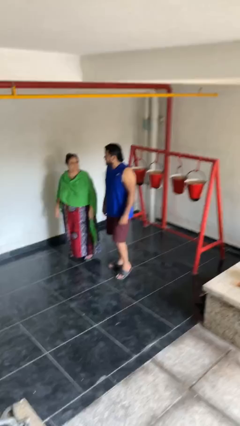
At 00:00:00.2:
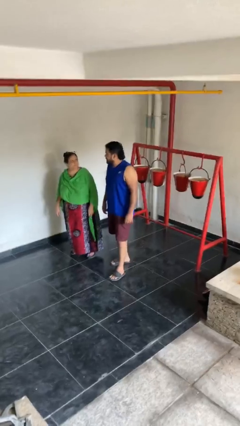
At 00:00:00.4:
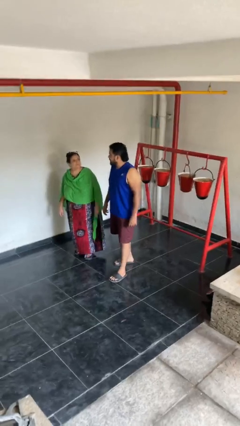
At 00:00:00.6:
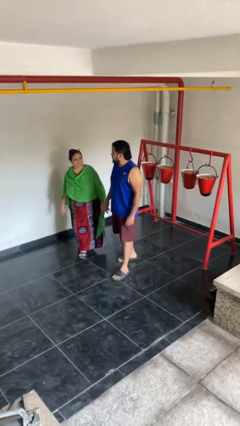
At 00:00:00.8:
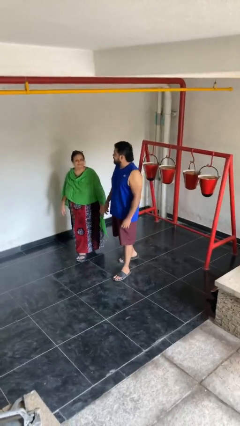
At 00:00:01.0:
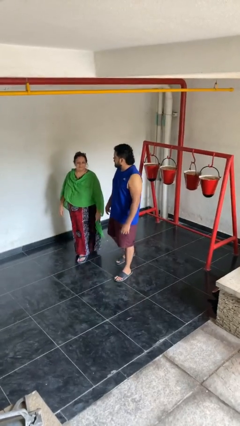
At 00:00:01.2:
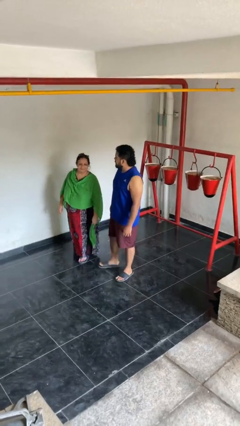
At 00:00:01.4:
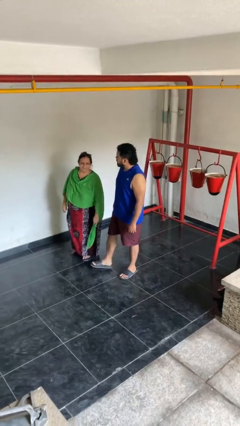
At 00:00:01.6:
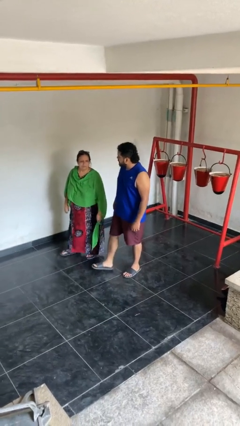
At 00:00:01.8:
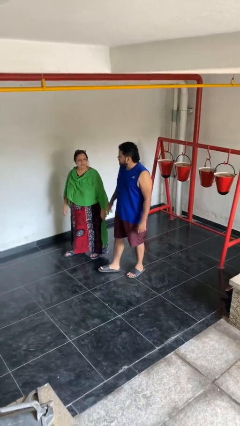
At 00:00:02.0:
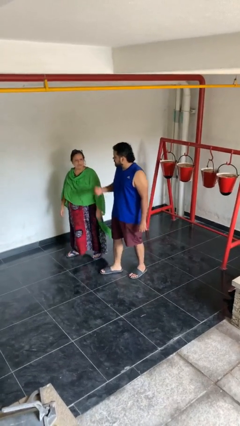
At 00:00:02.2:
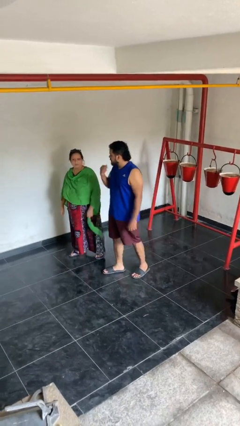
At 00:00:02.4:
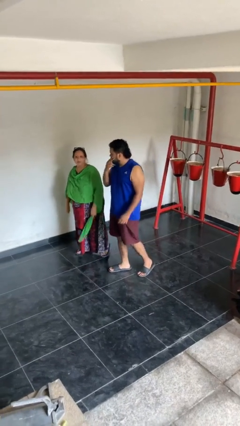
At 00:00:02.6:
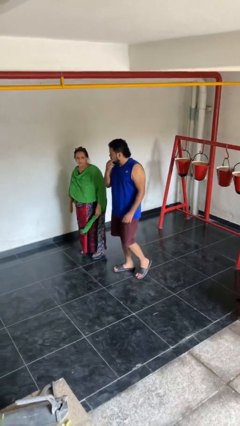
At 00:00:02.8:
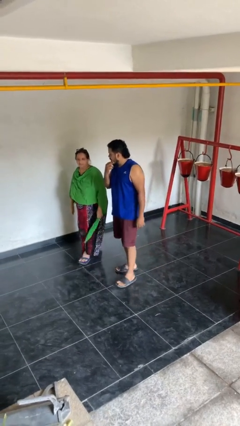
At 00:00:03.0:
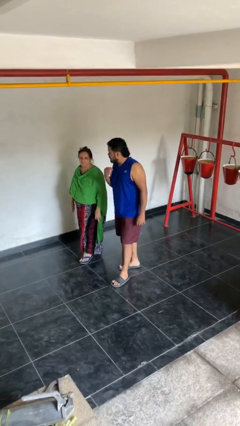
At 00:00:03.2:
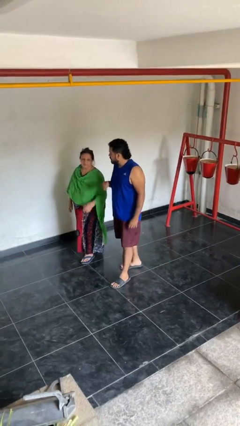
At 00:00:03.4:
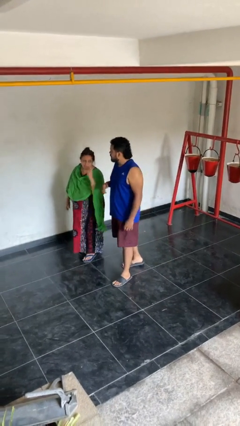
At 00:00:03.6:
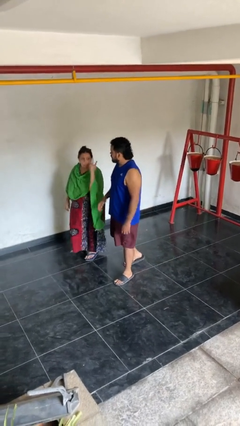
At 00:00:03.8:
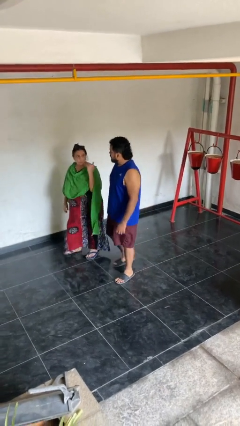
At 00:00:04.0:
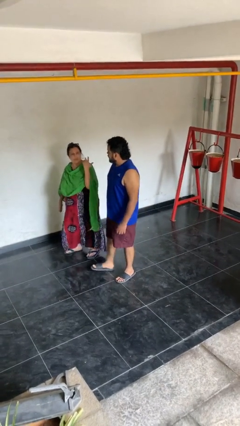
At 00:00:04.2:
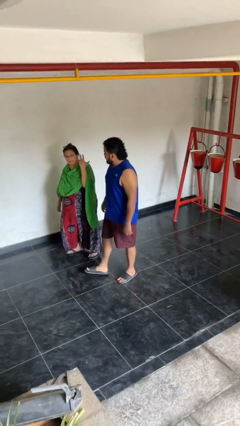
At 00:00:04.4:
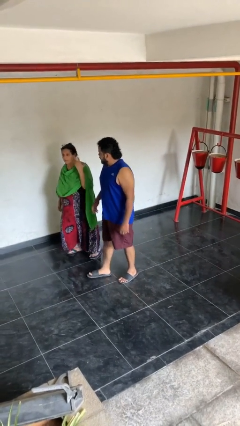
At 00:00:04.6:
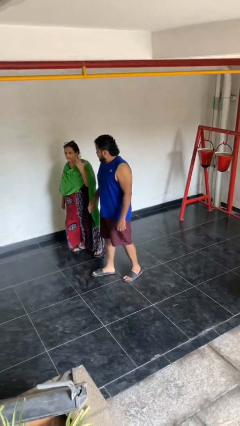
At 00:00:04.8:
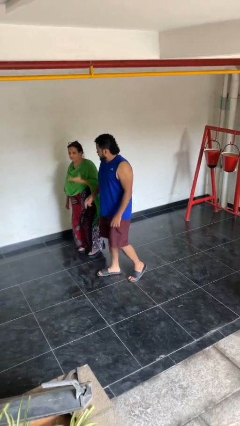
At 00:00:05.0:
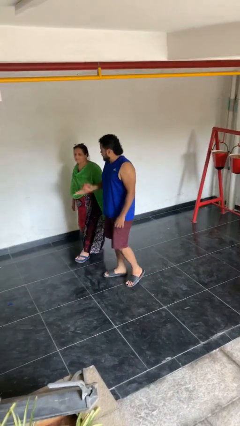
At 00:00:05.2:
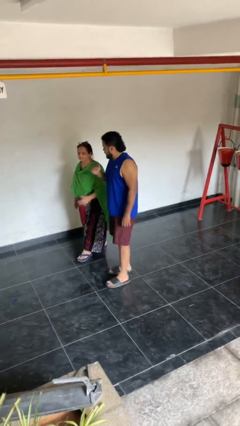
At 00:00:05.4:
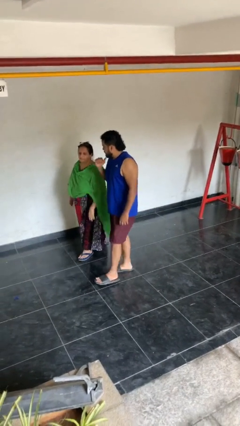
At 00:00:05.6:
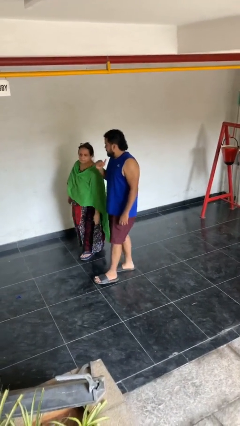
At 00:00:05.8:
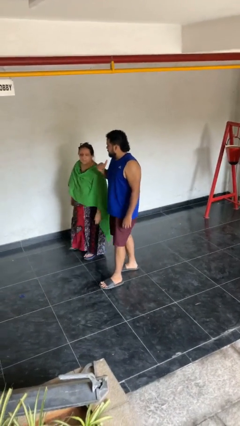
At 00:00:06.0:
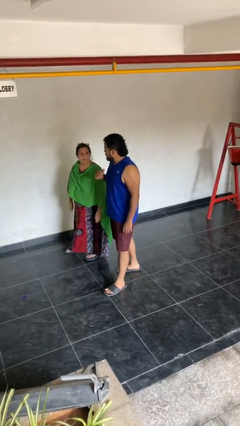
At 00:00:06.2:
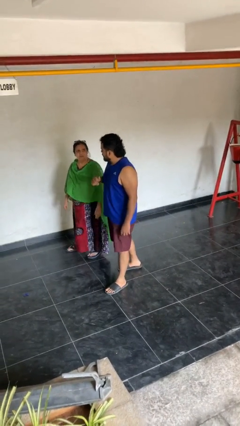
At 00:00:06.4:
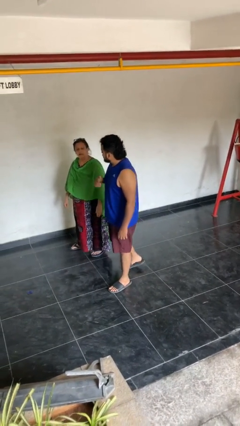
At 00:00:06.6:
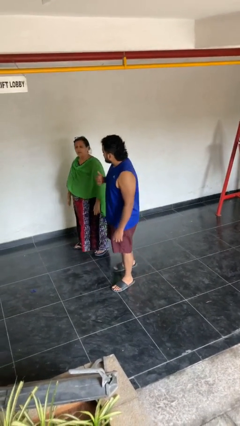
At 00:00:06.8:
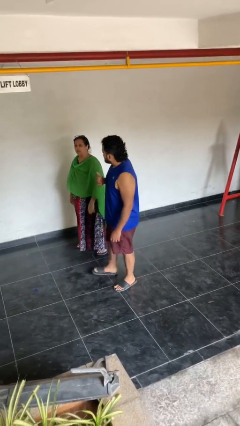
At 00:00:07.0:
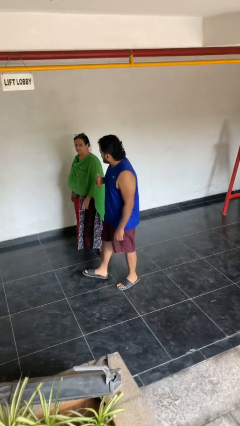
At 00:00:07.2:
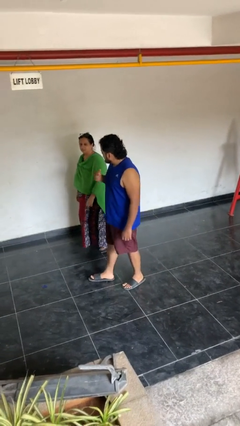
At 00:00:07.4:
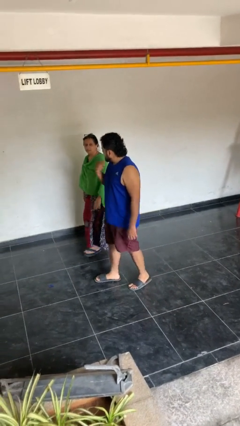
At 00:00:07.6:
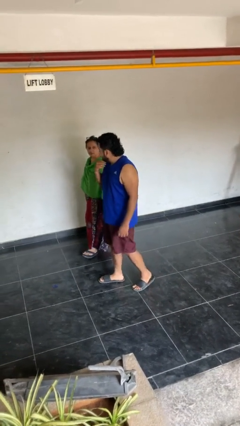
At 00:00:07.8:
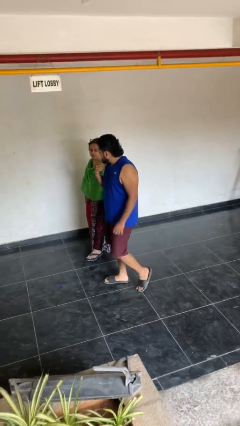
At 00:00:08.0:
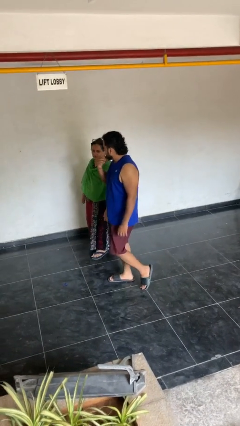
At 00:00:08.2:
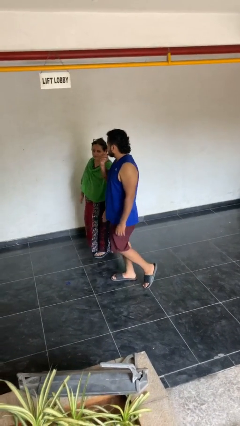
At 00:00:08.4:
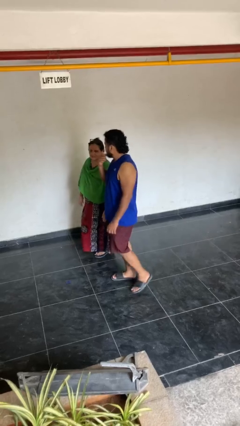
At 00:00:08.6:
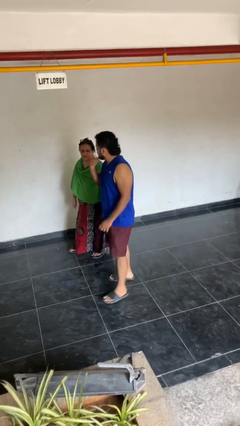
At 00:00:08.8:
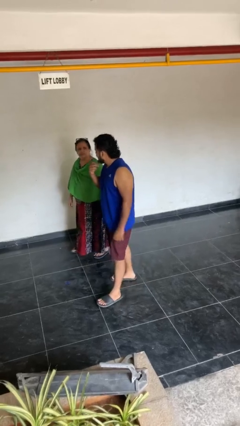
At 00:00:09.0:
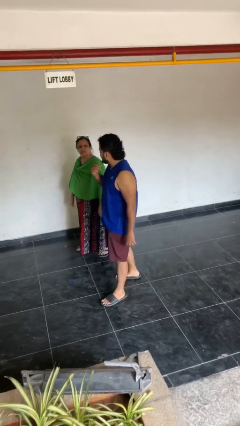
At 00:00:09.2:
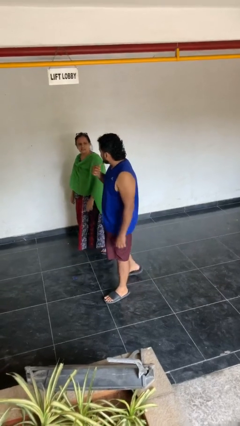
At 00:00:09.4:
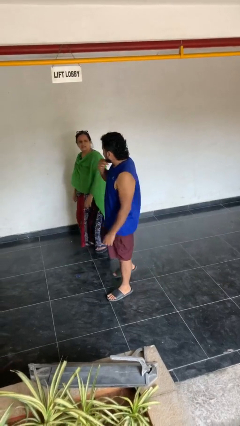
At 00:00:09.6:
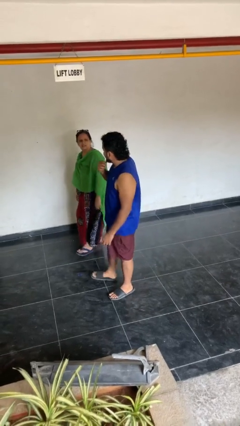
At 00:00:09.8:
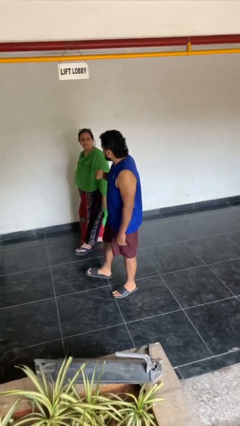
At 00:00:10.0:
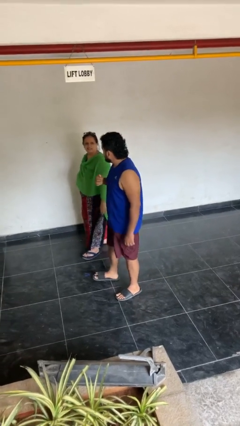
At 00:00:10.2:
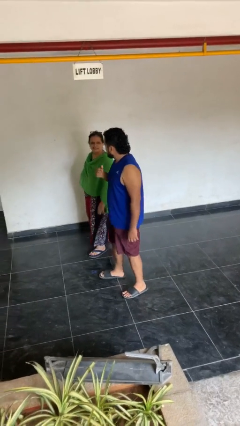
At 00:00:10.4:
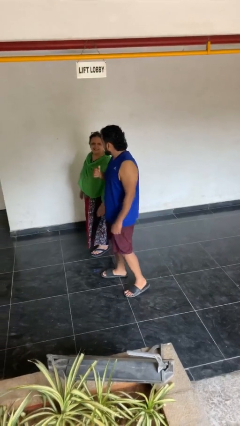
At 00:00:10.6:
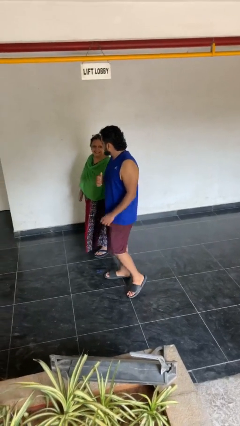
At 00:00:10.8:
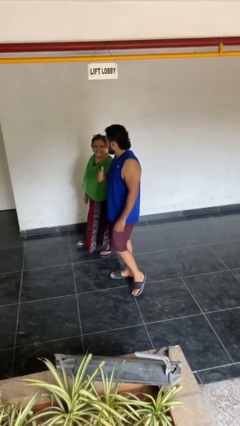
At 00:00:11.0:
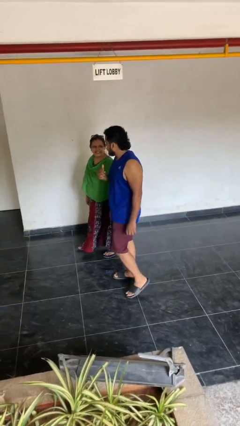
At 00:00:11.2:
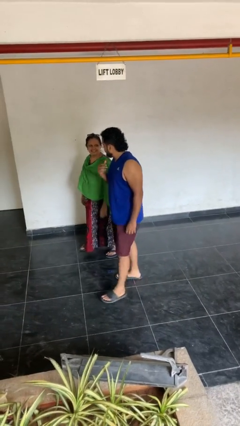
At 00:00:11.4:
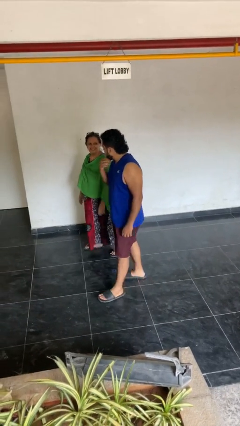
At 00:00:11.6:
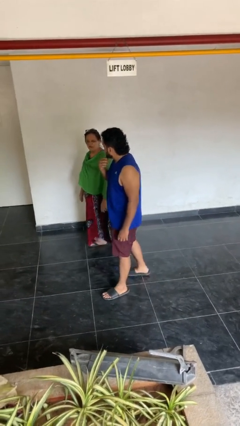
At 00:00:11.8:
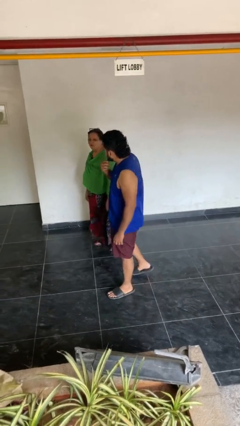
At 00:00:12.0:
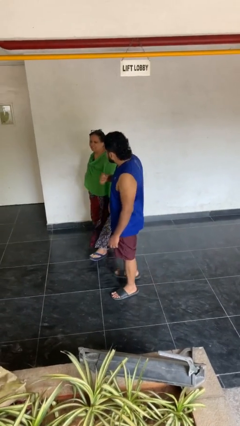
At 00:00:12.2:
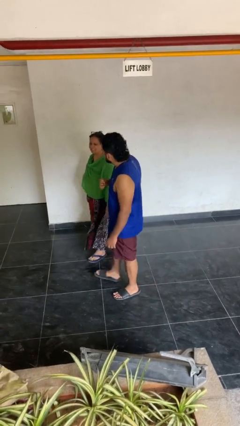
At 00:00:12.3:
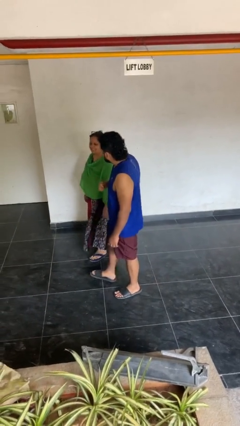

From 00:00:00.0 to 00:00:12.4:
person talks to person

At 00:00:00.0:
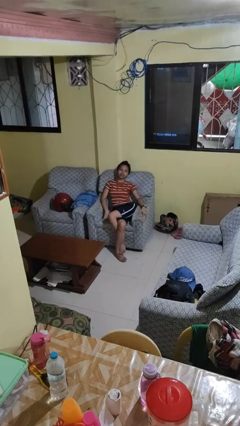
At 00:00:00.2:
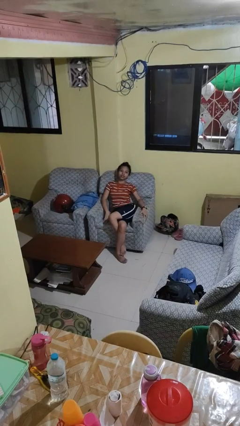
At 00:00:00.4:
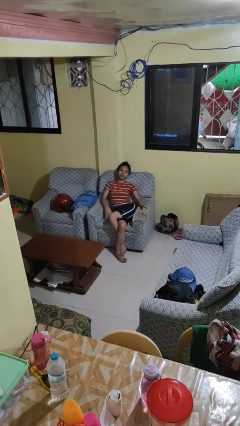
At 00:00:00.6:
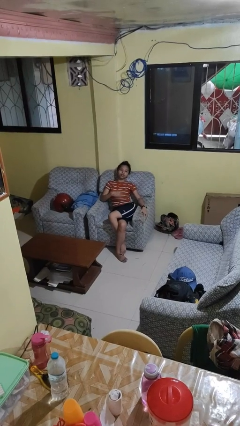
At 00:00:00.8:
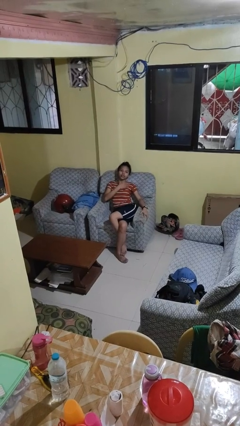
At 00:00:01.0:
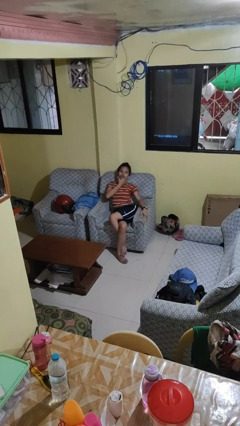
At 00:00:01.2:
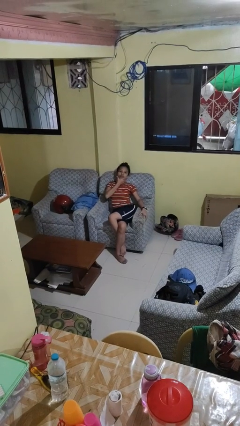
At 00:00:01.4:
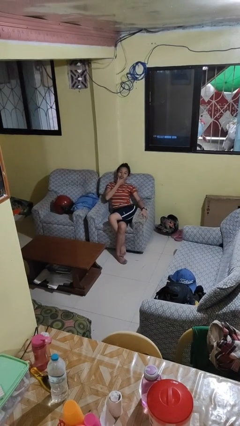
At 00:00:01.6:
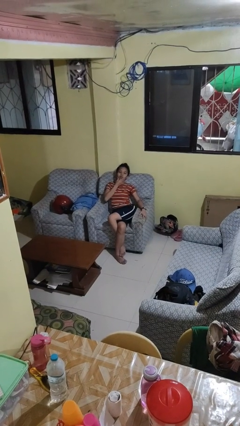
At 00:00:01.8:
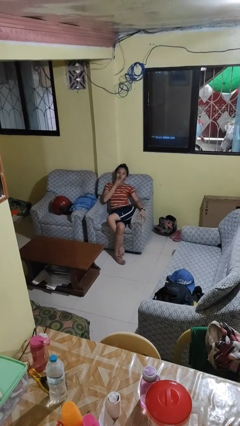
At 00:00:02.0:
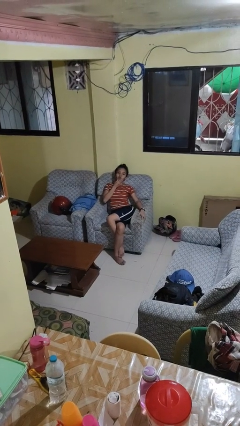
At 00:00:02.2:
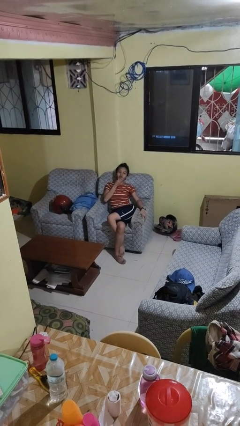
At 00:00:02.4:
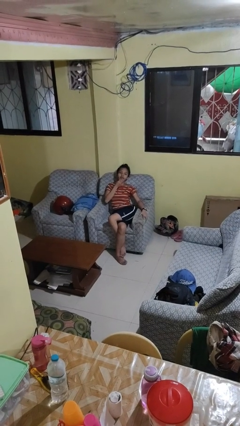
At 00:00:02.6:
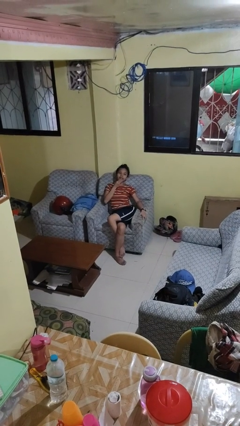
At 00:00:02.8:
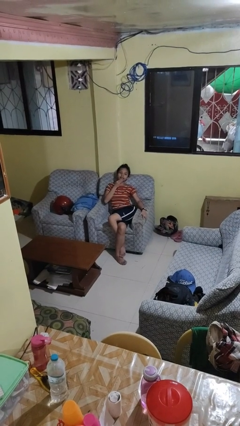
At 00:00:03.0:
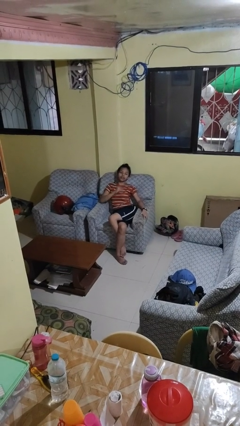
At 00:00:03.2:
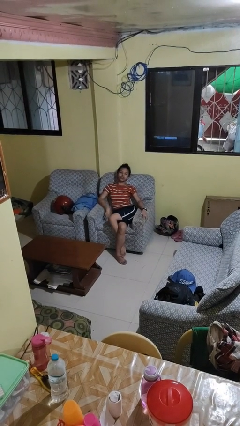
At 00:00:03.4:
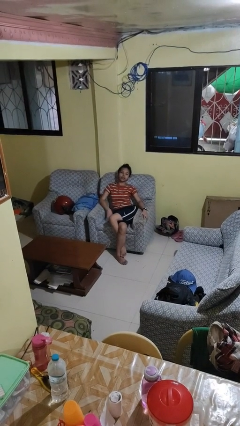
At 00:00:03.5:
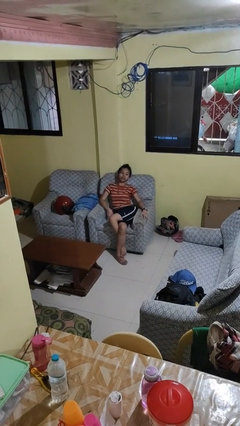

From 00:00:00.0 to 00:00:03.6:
person strokes chin

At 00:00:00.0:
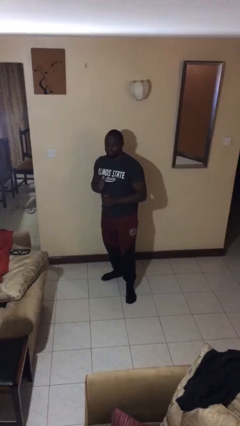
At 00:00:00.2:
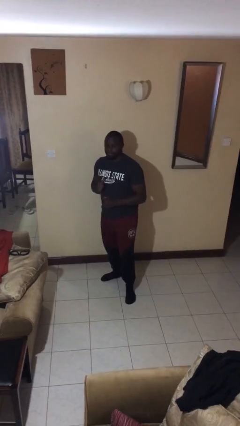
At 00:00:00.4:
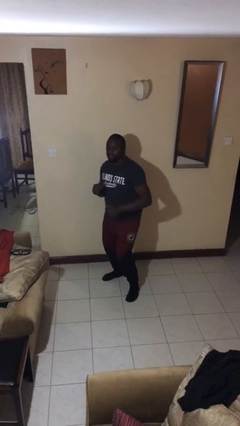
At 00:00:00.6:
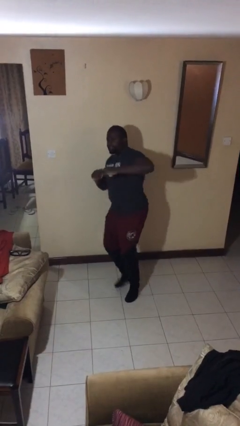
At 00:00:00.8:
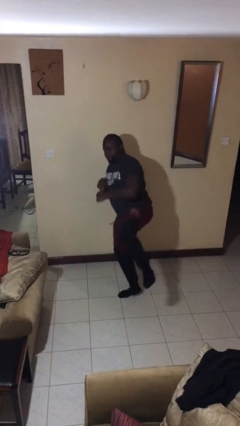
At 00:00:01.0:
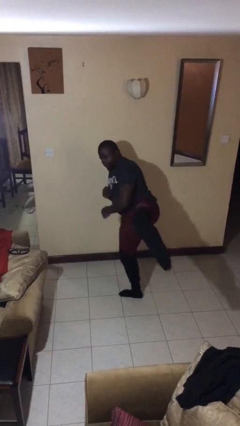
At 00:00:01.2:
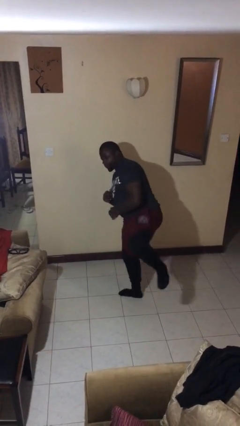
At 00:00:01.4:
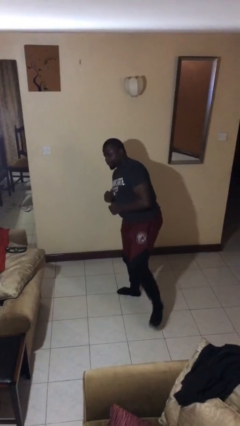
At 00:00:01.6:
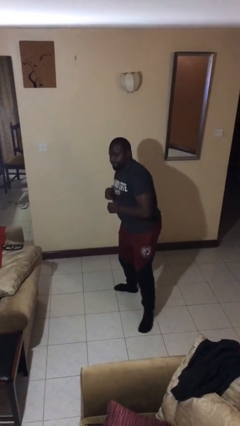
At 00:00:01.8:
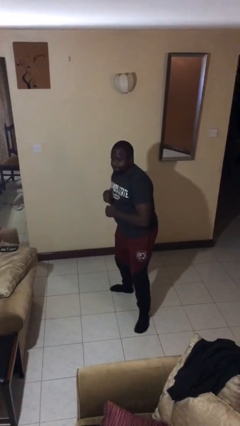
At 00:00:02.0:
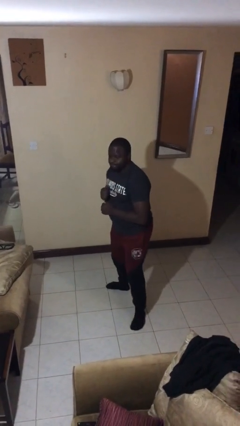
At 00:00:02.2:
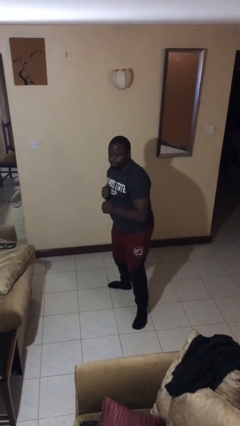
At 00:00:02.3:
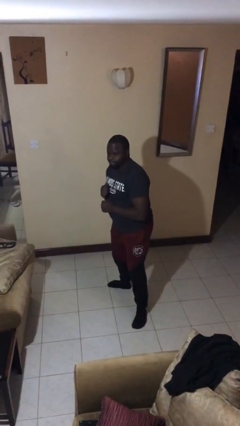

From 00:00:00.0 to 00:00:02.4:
person karate kicks
